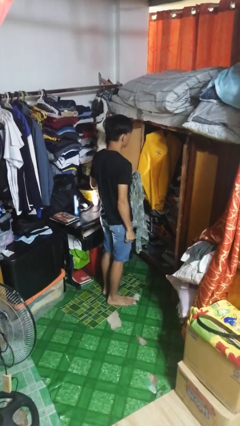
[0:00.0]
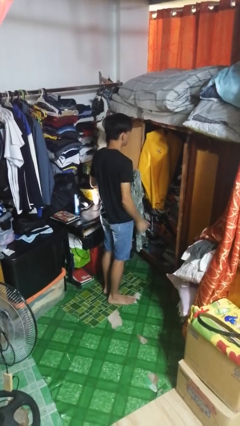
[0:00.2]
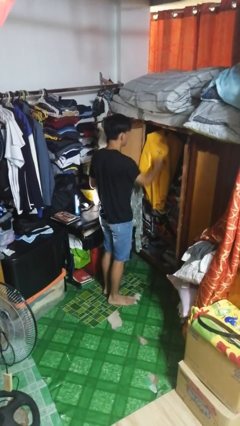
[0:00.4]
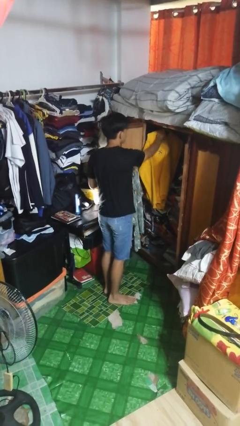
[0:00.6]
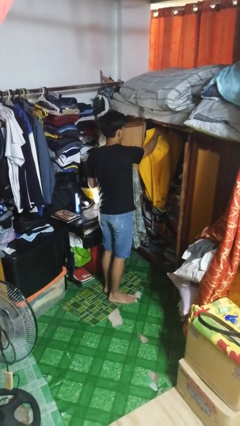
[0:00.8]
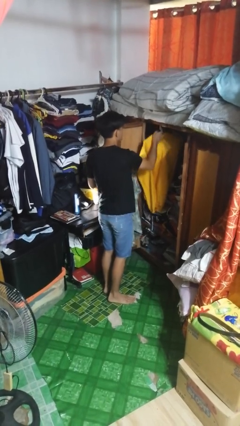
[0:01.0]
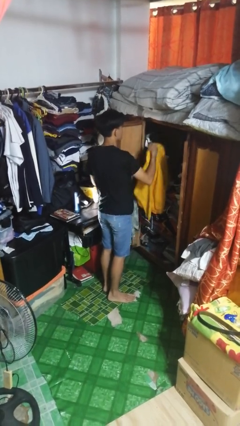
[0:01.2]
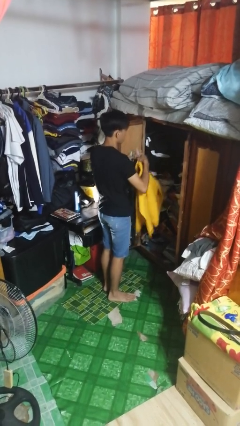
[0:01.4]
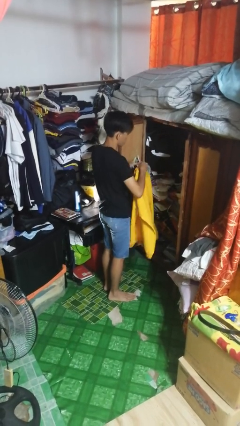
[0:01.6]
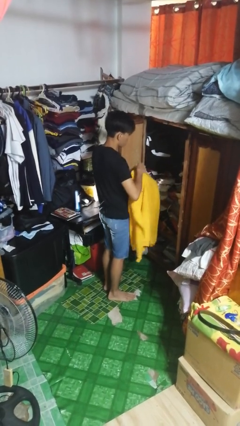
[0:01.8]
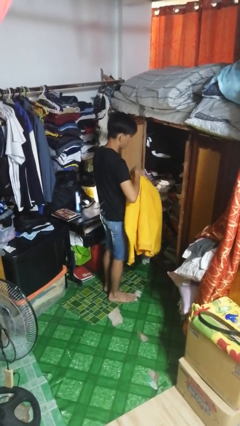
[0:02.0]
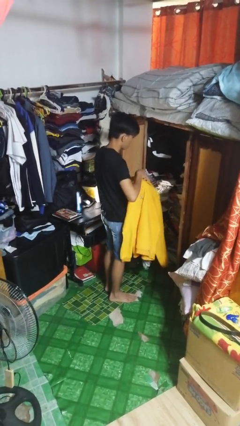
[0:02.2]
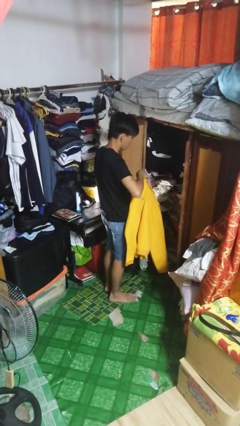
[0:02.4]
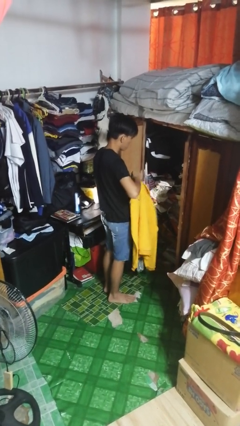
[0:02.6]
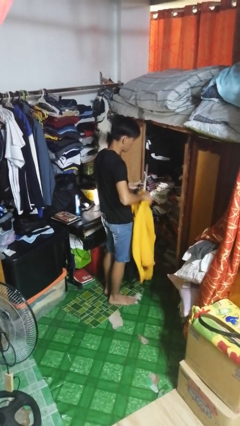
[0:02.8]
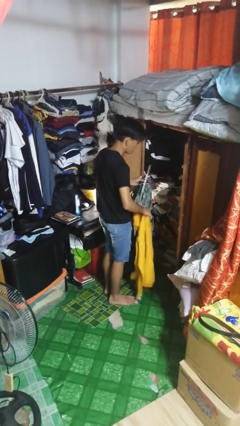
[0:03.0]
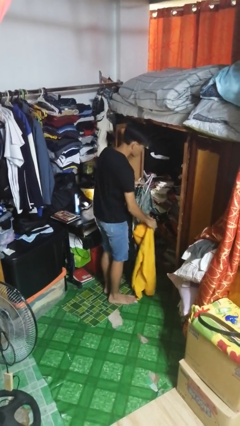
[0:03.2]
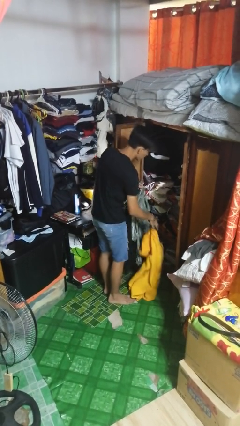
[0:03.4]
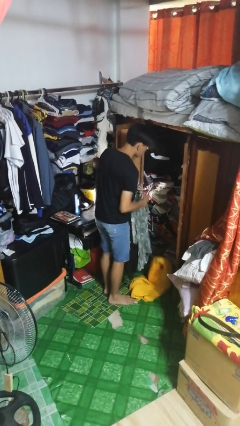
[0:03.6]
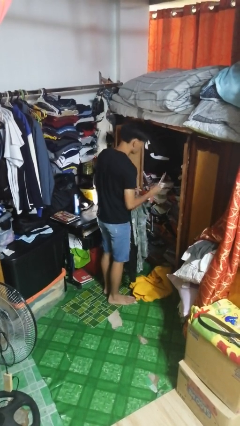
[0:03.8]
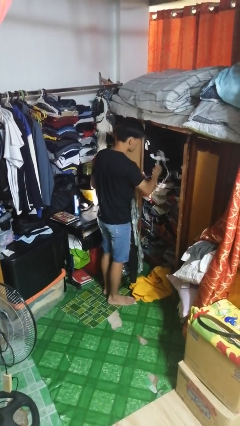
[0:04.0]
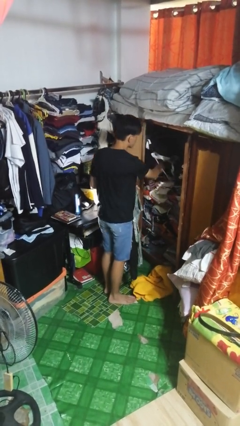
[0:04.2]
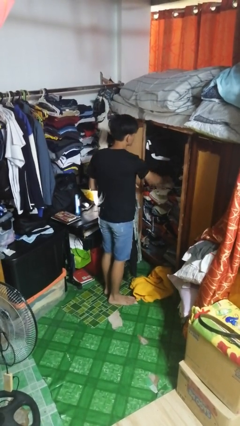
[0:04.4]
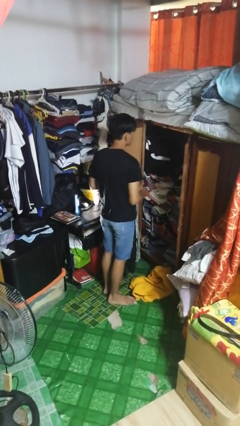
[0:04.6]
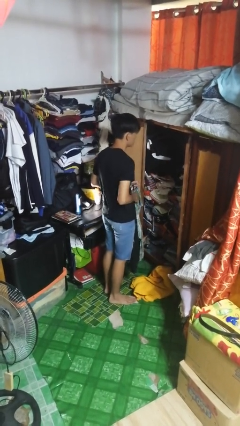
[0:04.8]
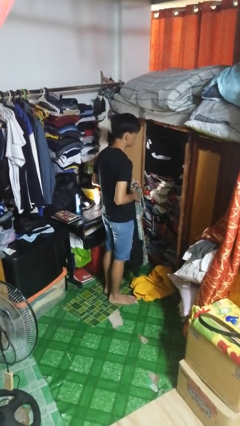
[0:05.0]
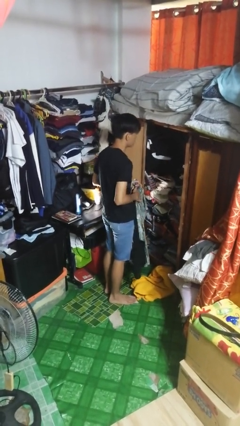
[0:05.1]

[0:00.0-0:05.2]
person takes clothes from closet

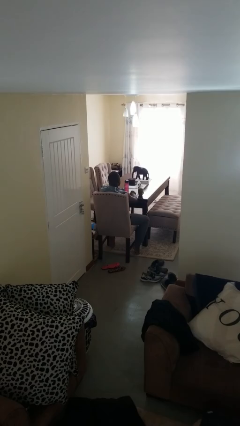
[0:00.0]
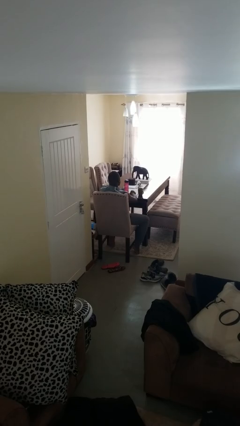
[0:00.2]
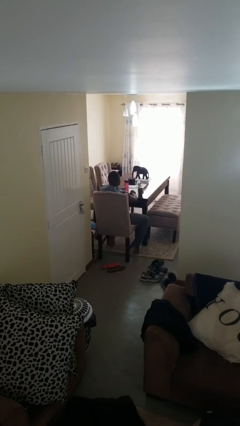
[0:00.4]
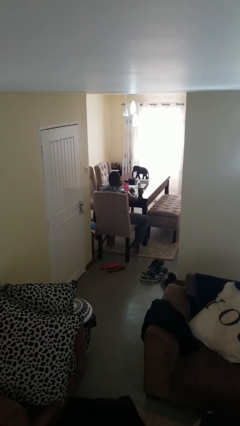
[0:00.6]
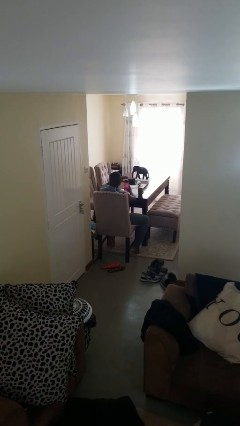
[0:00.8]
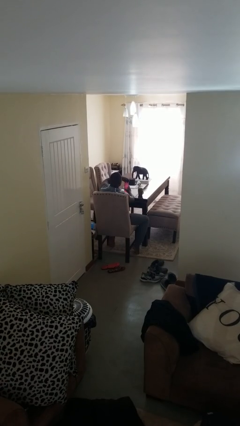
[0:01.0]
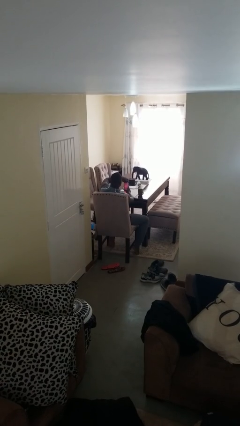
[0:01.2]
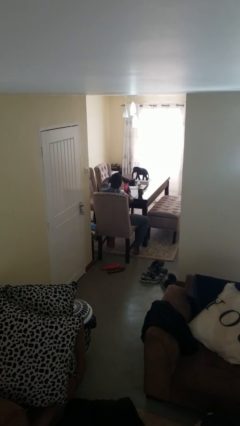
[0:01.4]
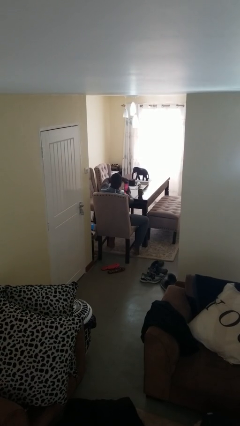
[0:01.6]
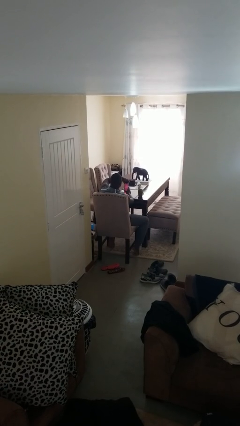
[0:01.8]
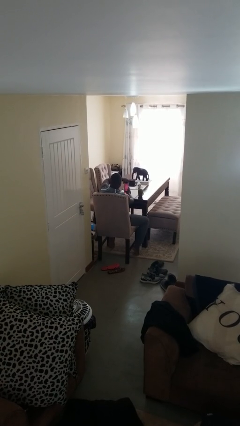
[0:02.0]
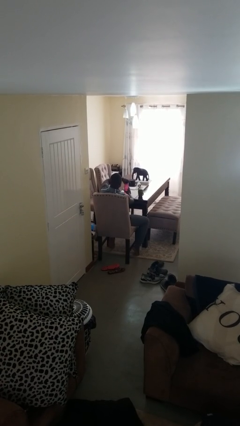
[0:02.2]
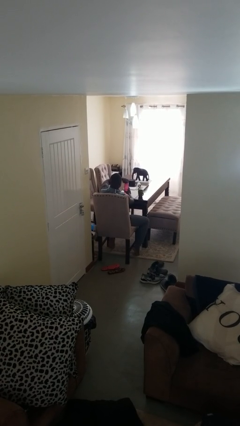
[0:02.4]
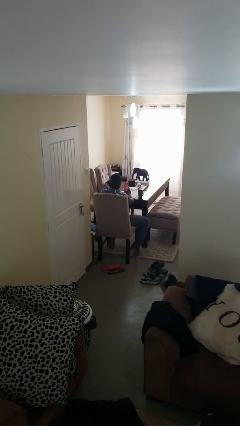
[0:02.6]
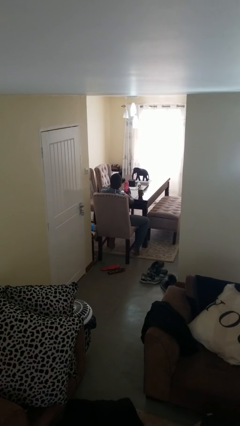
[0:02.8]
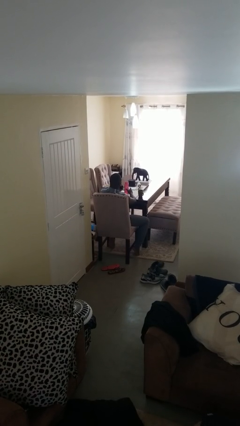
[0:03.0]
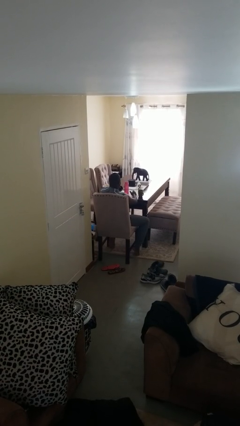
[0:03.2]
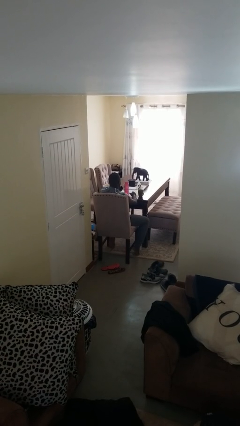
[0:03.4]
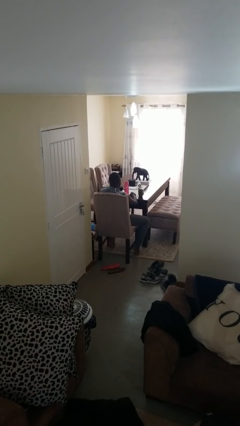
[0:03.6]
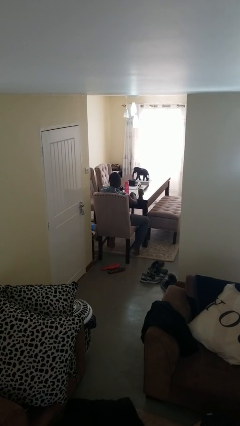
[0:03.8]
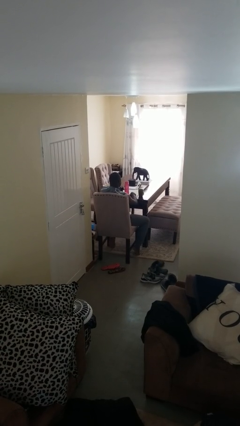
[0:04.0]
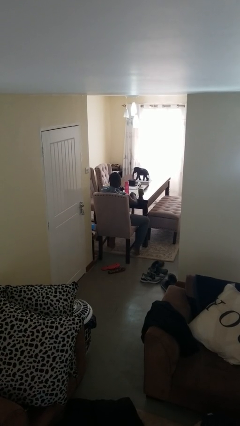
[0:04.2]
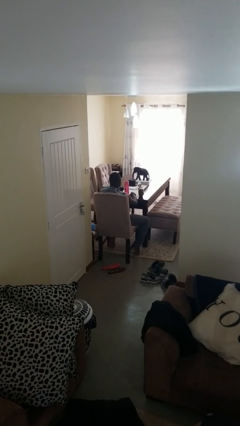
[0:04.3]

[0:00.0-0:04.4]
person unscrews lid from bottle

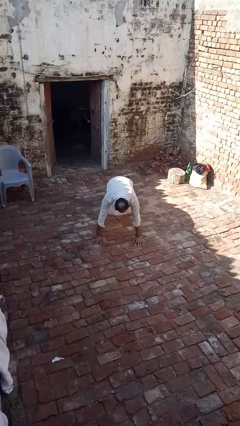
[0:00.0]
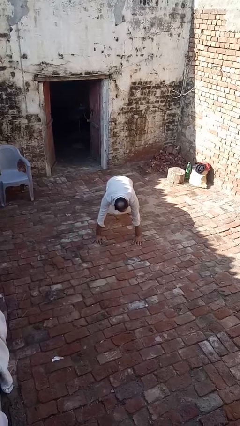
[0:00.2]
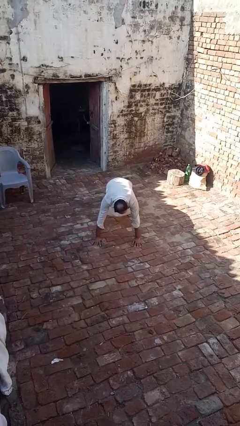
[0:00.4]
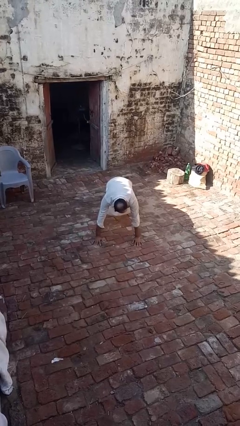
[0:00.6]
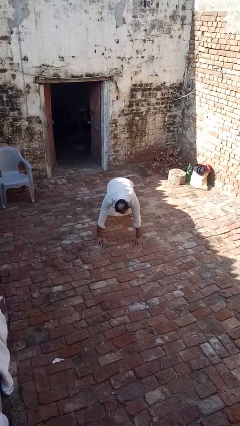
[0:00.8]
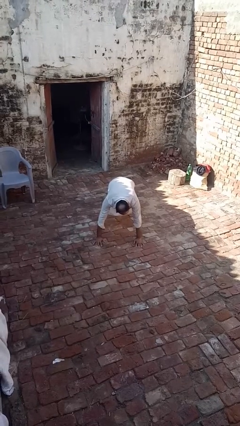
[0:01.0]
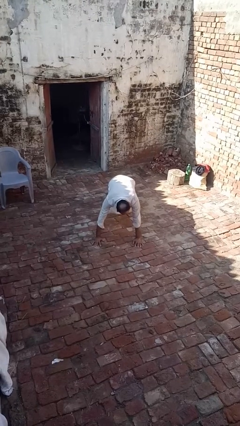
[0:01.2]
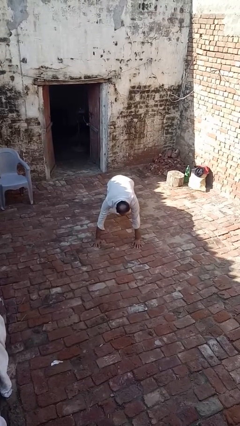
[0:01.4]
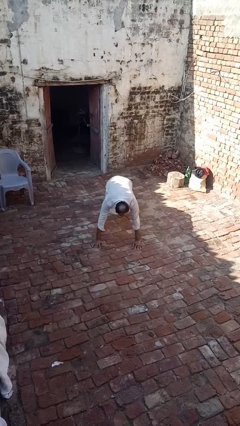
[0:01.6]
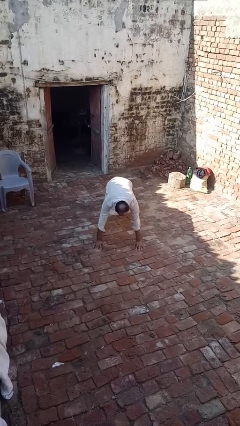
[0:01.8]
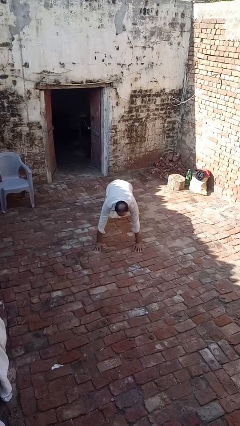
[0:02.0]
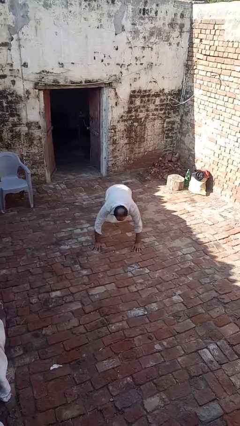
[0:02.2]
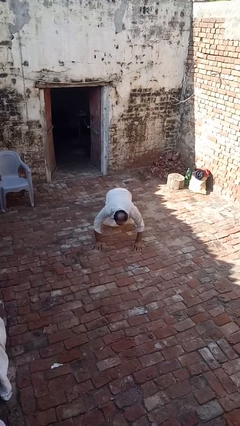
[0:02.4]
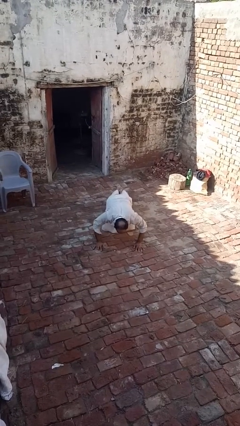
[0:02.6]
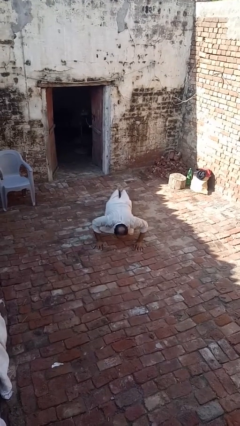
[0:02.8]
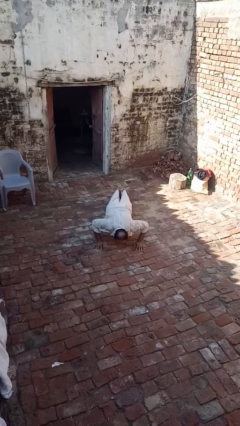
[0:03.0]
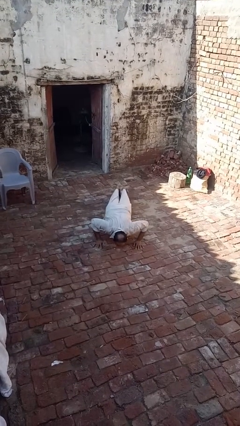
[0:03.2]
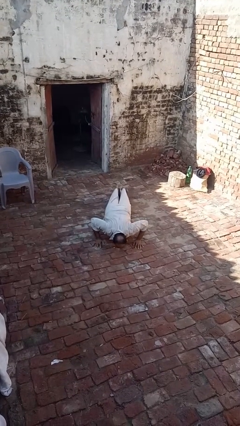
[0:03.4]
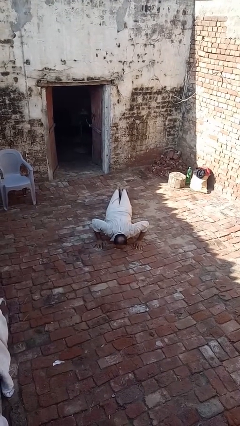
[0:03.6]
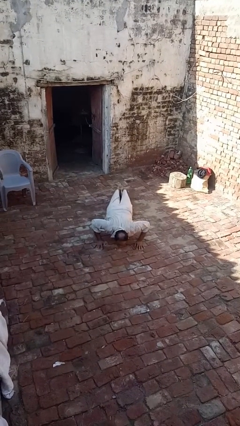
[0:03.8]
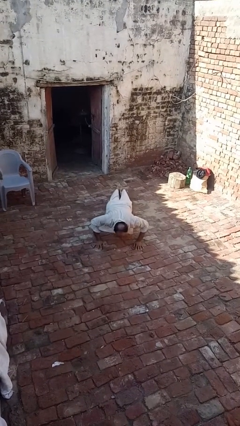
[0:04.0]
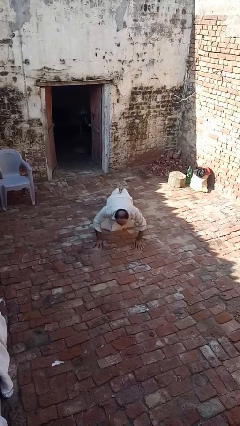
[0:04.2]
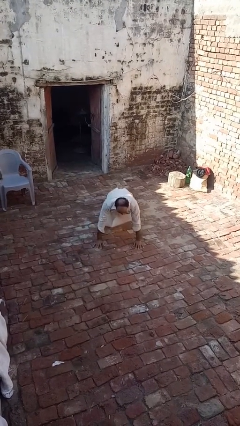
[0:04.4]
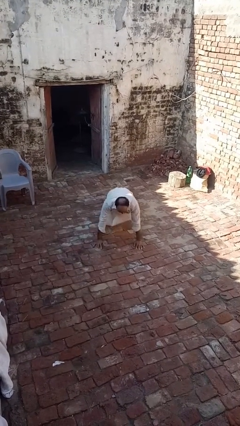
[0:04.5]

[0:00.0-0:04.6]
person exercises with pushup

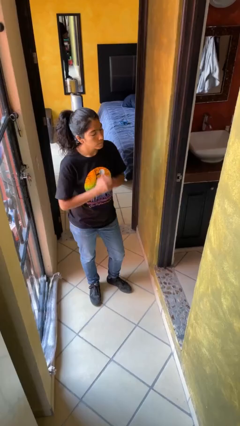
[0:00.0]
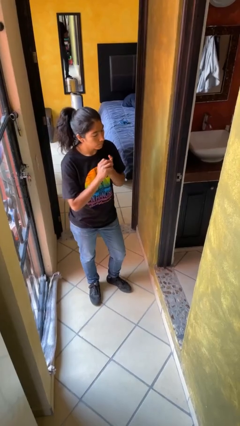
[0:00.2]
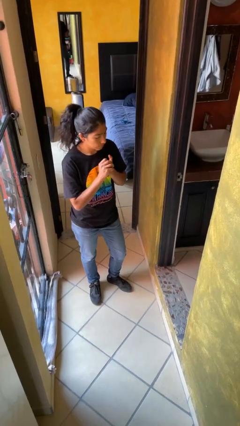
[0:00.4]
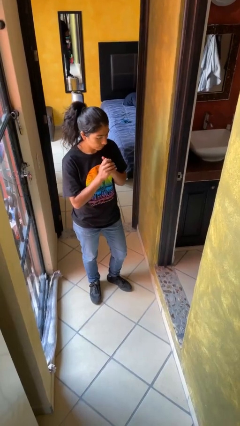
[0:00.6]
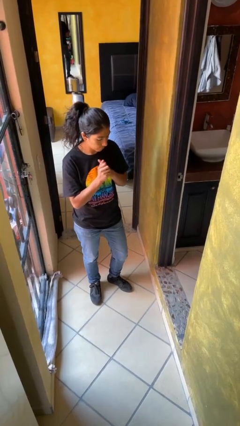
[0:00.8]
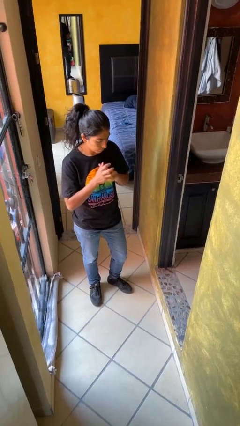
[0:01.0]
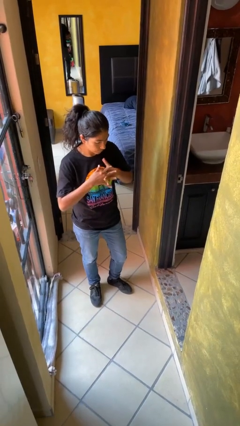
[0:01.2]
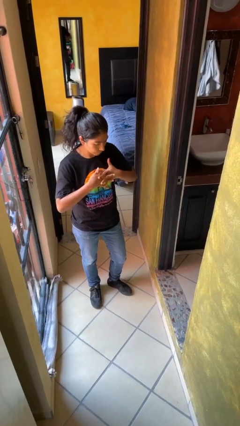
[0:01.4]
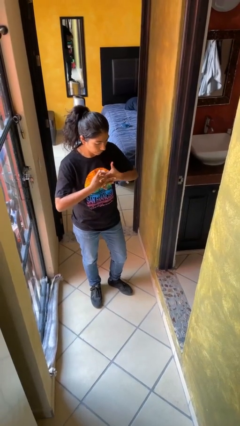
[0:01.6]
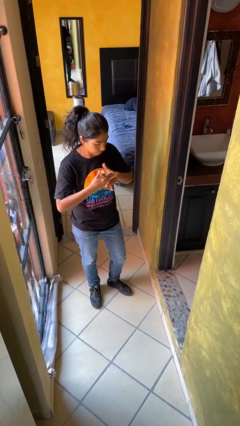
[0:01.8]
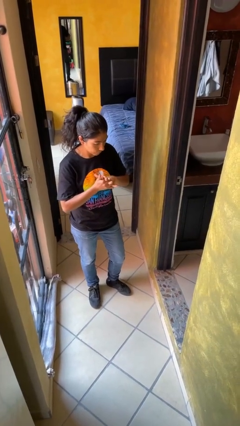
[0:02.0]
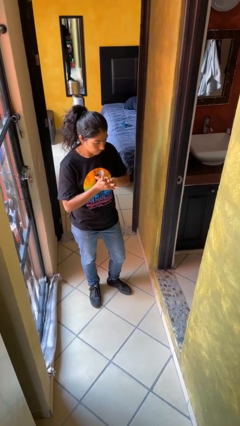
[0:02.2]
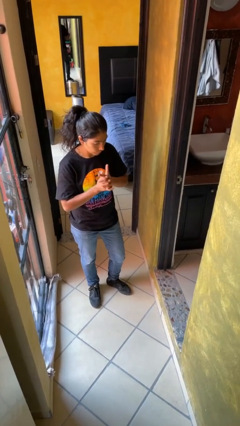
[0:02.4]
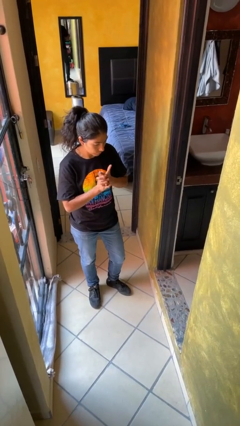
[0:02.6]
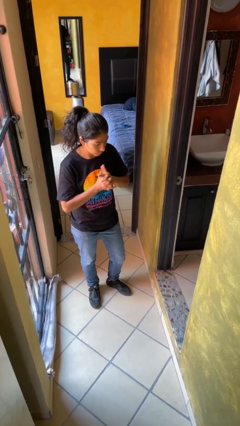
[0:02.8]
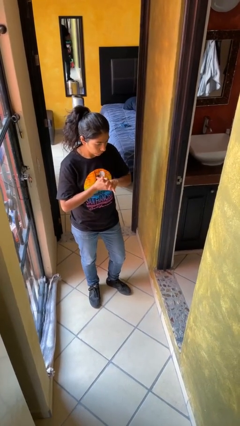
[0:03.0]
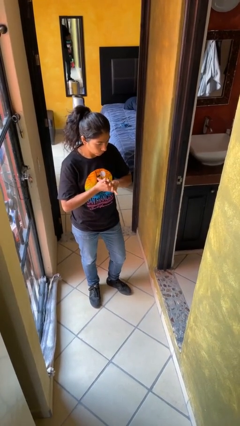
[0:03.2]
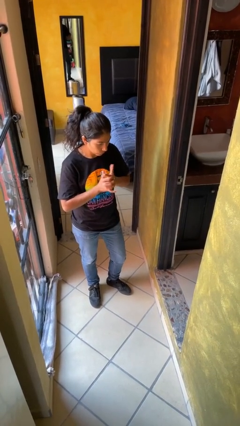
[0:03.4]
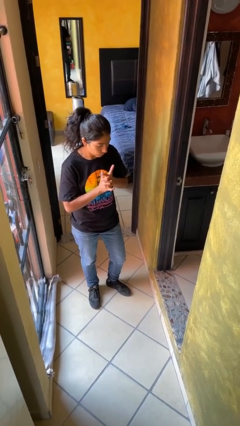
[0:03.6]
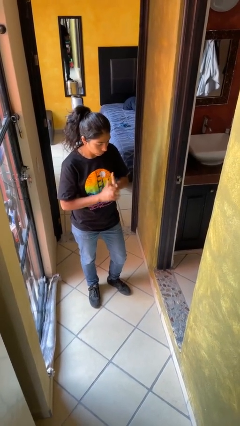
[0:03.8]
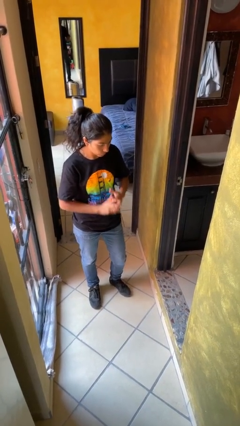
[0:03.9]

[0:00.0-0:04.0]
person cracks knuckles
